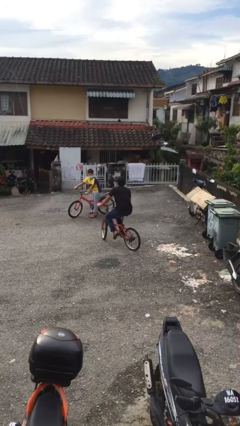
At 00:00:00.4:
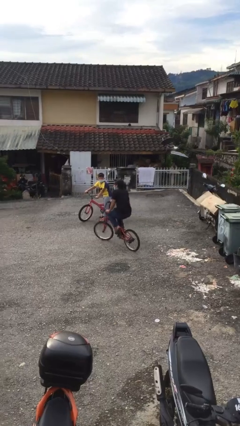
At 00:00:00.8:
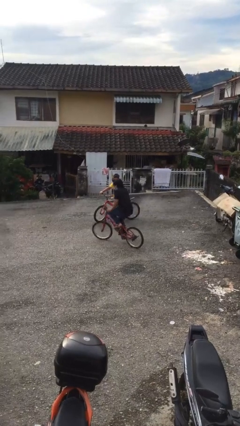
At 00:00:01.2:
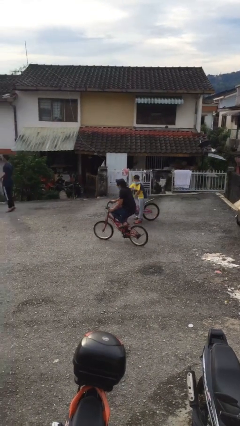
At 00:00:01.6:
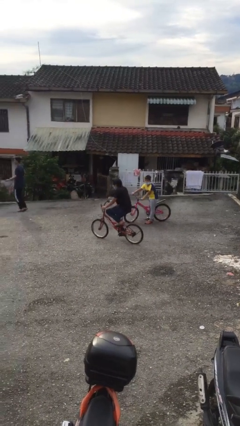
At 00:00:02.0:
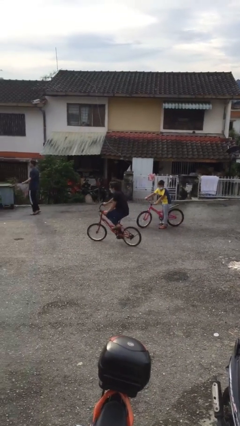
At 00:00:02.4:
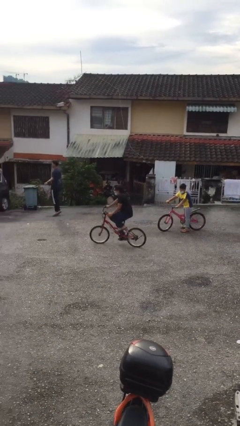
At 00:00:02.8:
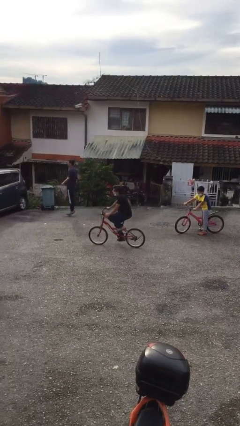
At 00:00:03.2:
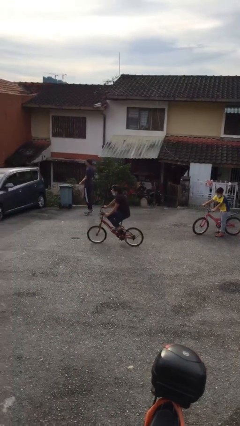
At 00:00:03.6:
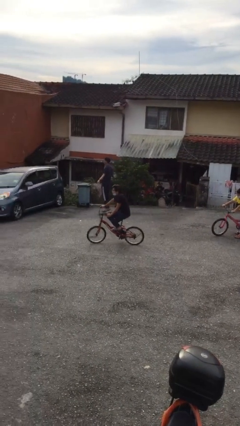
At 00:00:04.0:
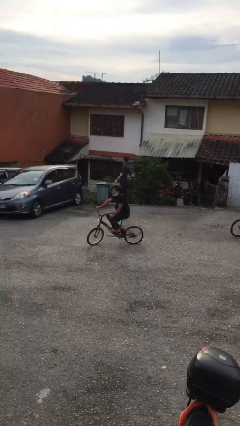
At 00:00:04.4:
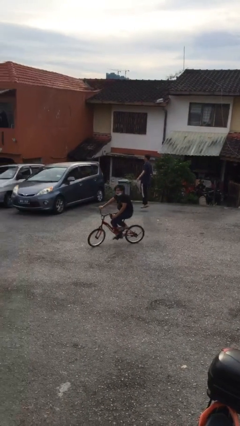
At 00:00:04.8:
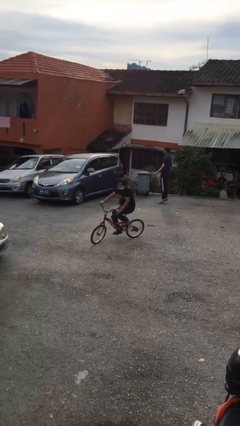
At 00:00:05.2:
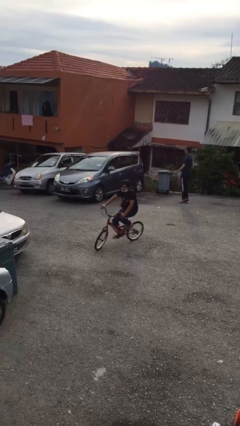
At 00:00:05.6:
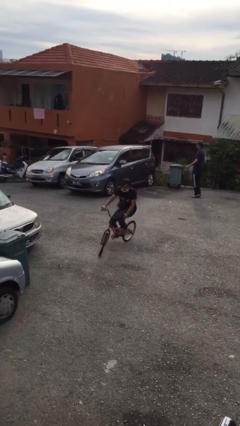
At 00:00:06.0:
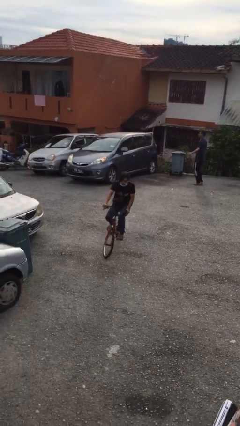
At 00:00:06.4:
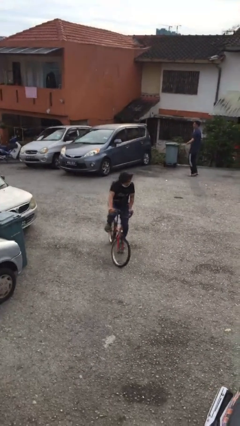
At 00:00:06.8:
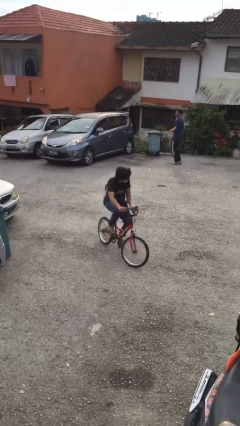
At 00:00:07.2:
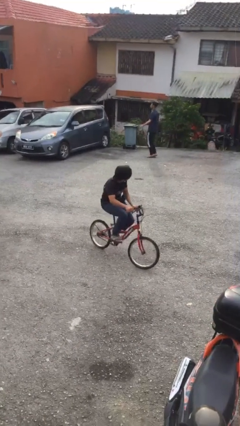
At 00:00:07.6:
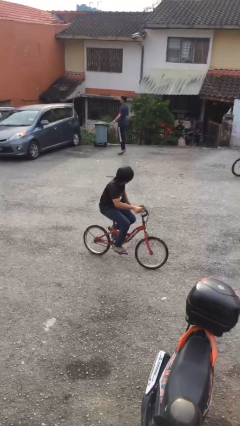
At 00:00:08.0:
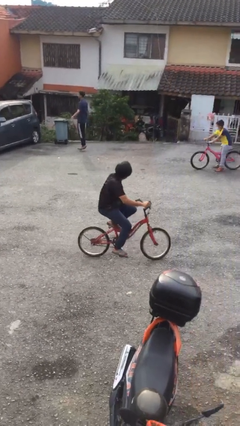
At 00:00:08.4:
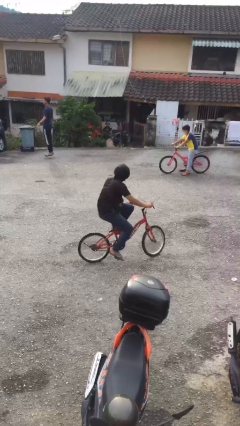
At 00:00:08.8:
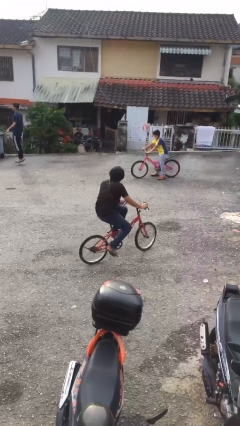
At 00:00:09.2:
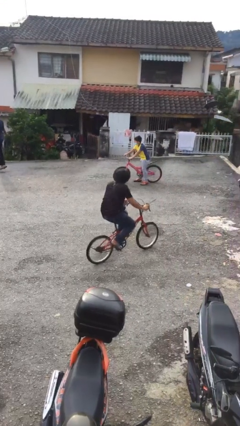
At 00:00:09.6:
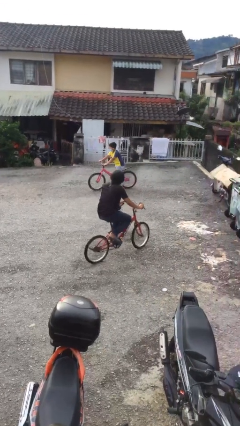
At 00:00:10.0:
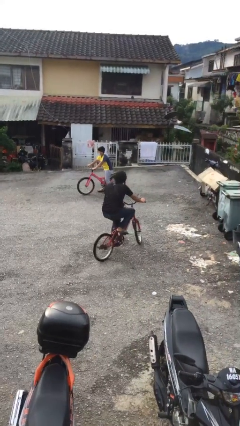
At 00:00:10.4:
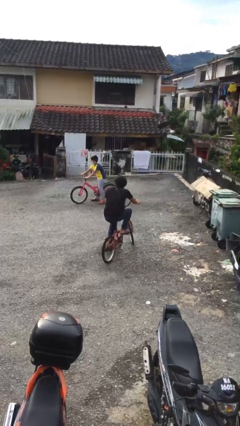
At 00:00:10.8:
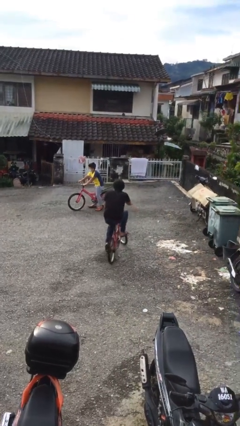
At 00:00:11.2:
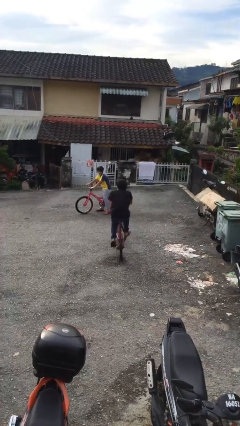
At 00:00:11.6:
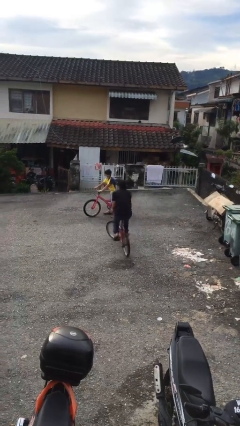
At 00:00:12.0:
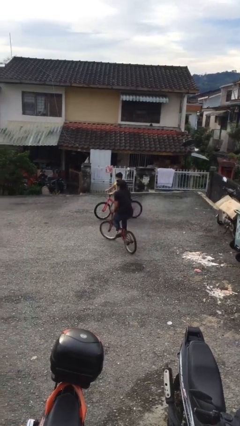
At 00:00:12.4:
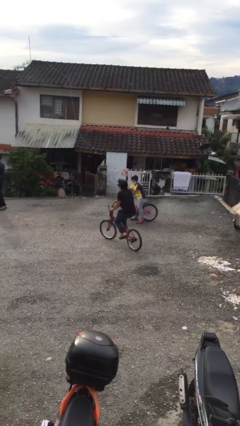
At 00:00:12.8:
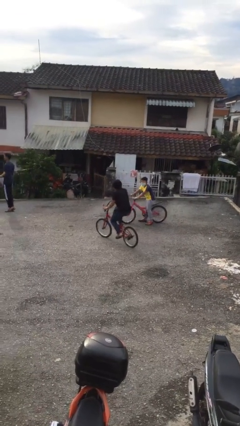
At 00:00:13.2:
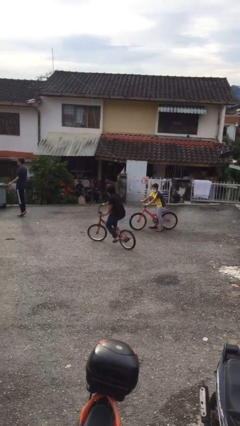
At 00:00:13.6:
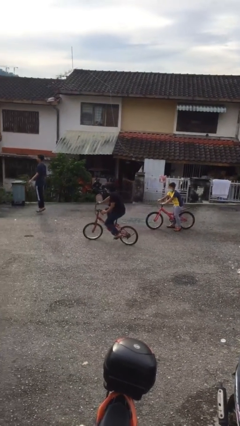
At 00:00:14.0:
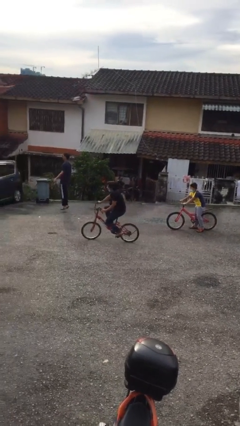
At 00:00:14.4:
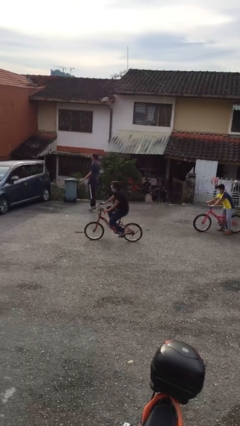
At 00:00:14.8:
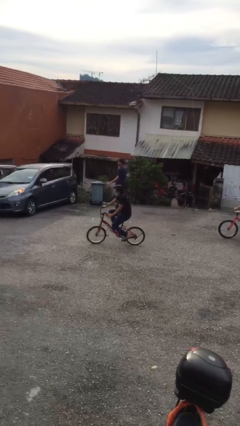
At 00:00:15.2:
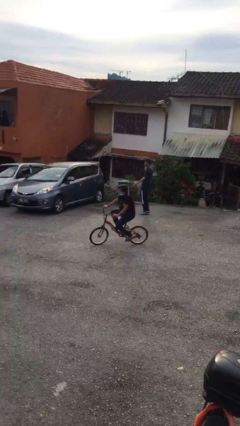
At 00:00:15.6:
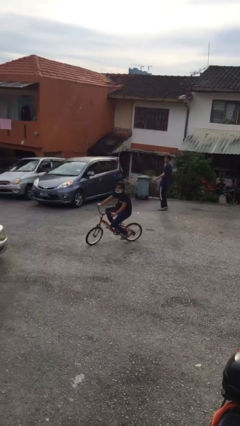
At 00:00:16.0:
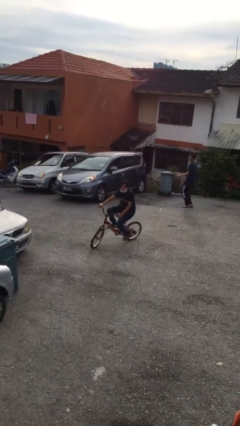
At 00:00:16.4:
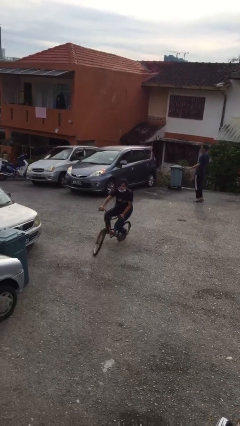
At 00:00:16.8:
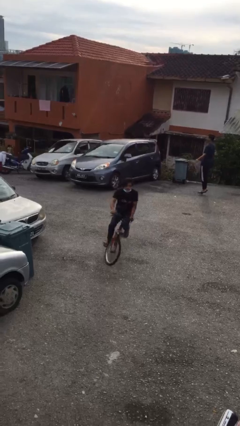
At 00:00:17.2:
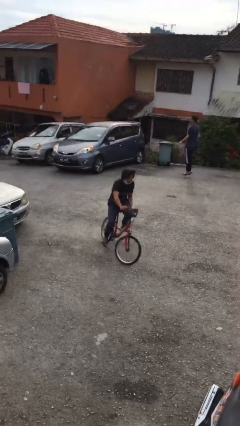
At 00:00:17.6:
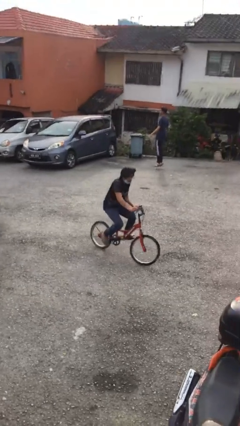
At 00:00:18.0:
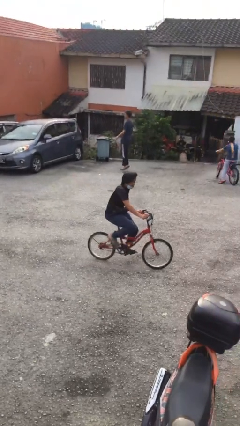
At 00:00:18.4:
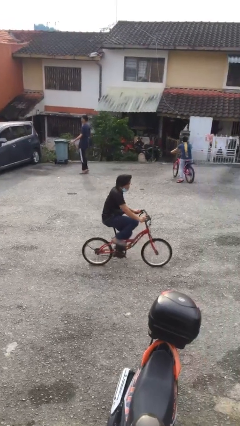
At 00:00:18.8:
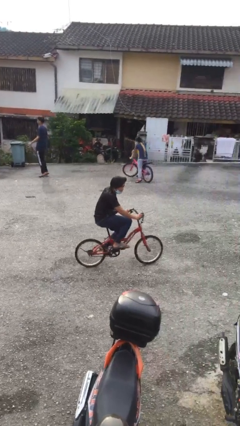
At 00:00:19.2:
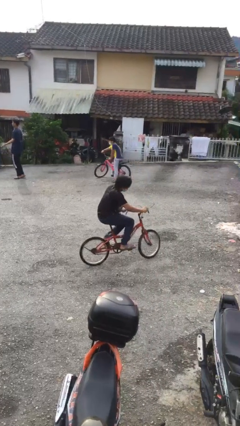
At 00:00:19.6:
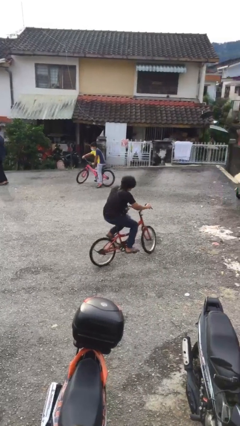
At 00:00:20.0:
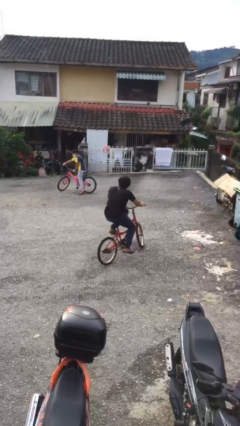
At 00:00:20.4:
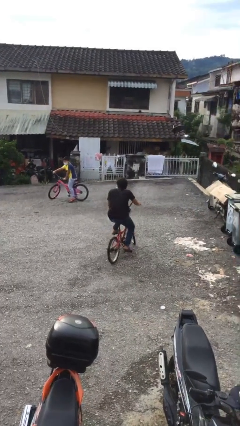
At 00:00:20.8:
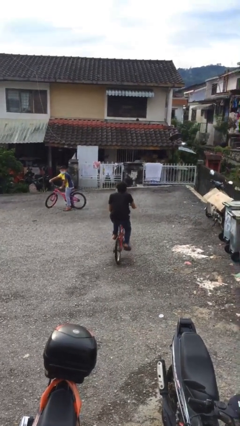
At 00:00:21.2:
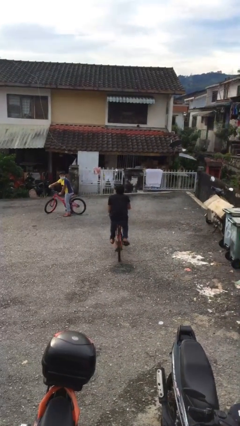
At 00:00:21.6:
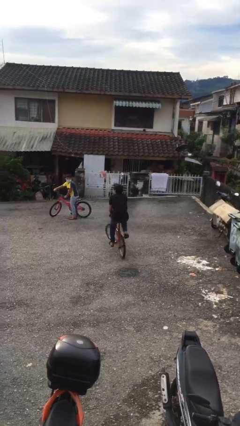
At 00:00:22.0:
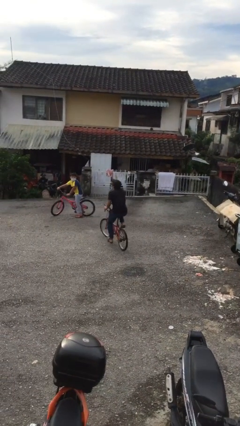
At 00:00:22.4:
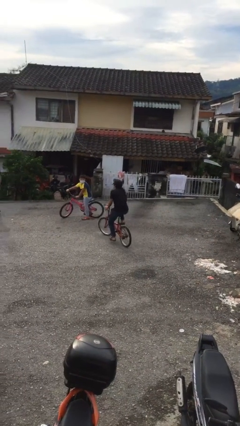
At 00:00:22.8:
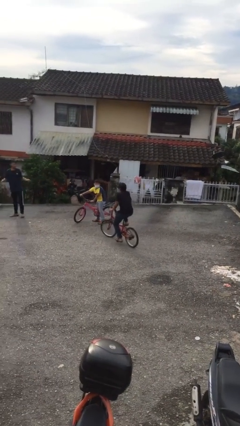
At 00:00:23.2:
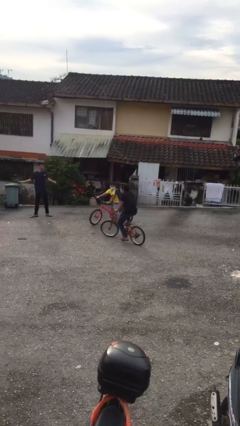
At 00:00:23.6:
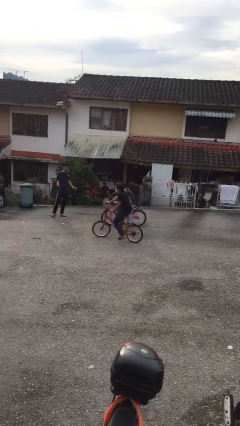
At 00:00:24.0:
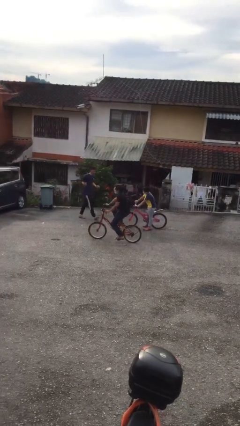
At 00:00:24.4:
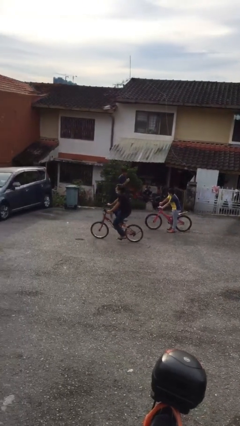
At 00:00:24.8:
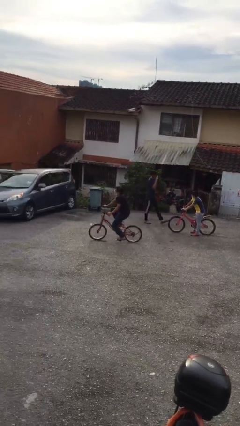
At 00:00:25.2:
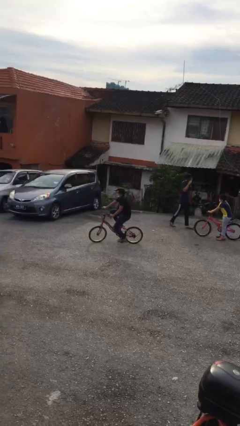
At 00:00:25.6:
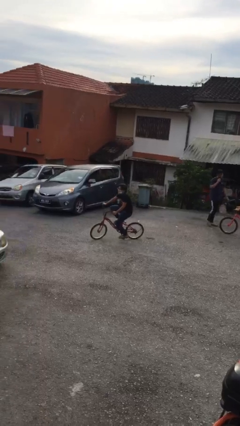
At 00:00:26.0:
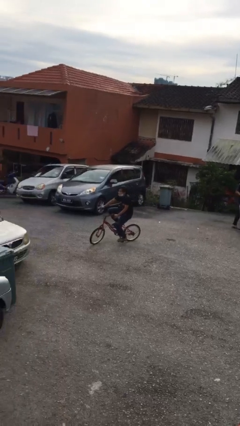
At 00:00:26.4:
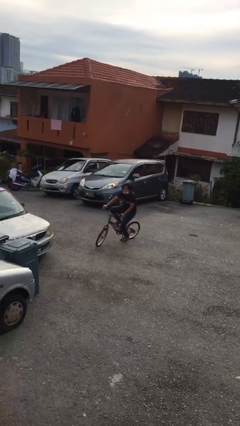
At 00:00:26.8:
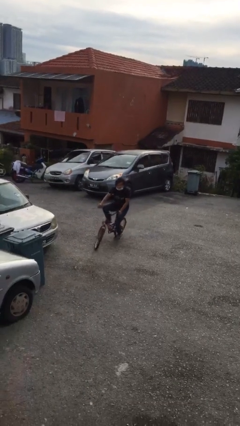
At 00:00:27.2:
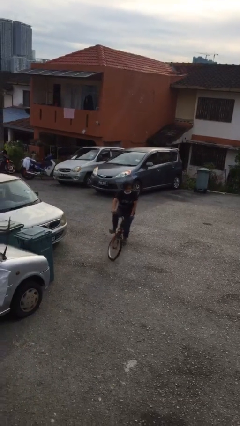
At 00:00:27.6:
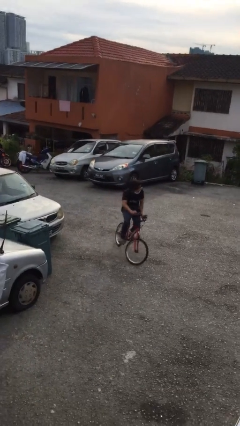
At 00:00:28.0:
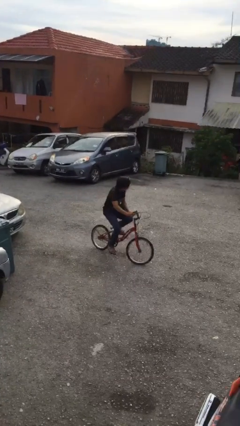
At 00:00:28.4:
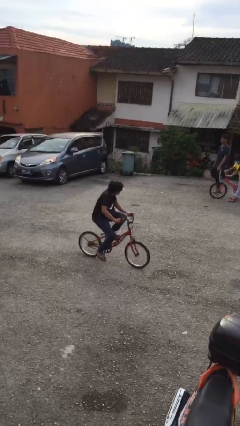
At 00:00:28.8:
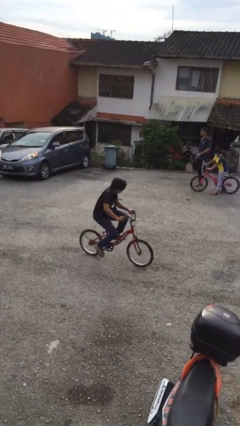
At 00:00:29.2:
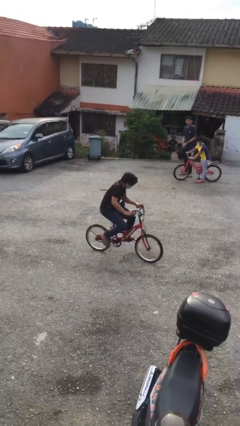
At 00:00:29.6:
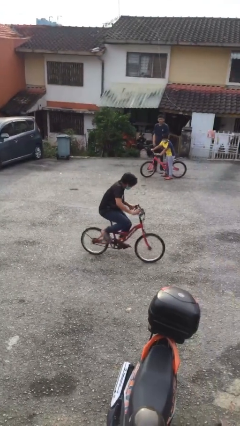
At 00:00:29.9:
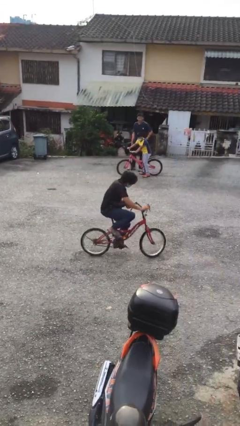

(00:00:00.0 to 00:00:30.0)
person rides bicycle

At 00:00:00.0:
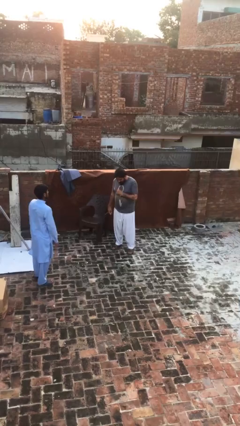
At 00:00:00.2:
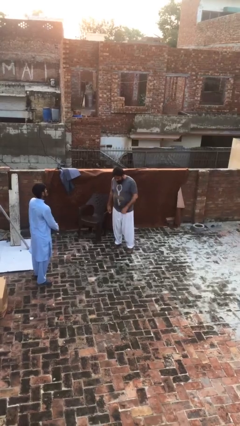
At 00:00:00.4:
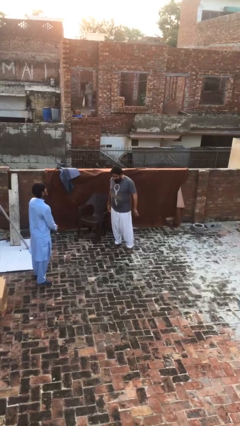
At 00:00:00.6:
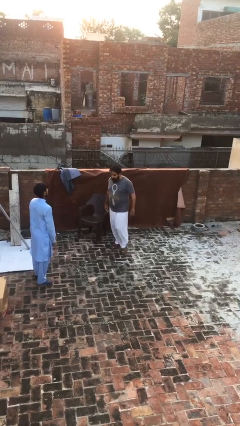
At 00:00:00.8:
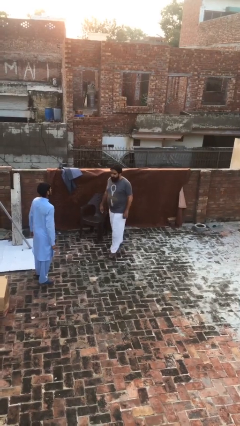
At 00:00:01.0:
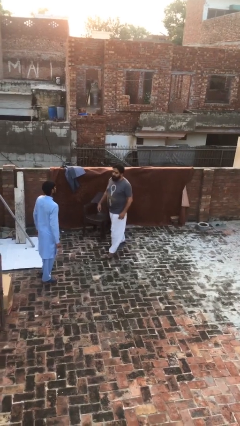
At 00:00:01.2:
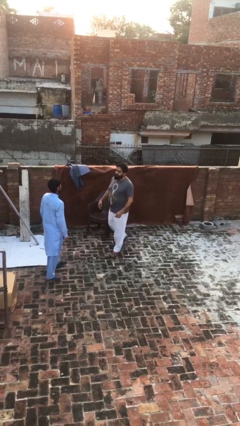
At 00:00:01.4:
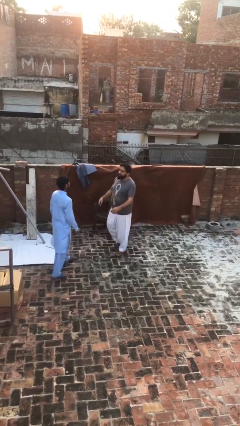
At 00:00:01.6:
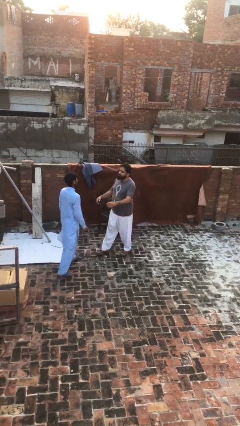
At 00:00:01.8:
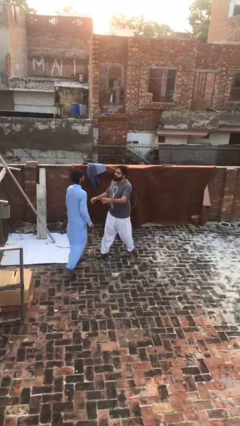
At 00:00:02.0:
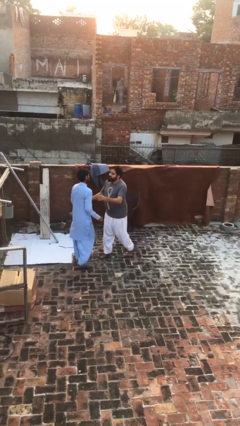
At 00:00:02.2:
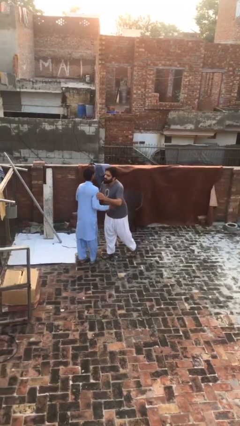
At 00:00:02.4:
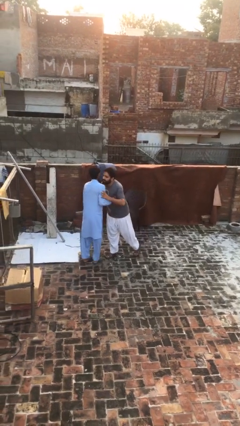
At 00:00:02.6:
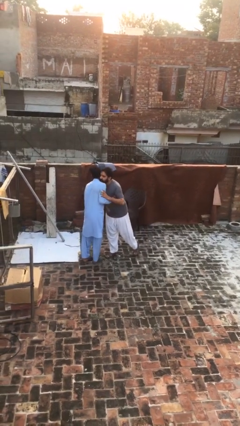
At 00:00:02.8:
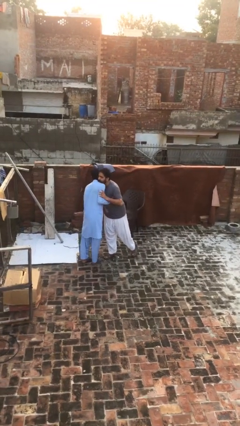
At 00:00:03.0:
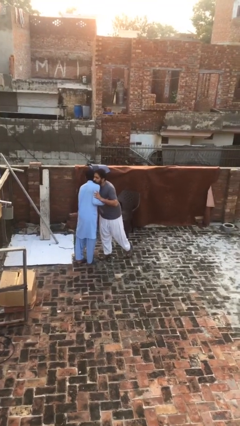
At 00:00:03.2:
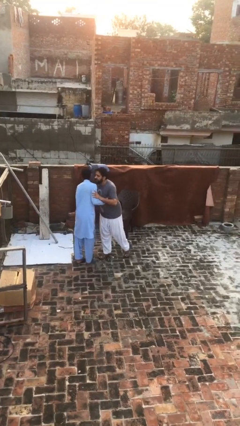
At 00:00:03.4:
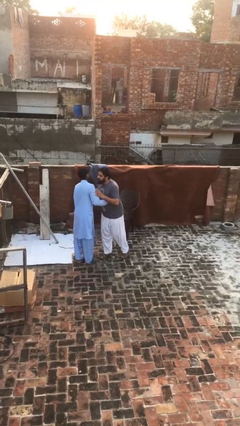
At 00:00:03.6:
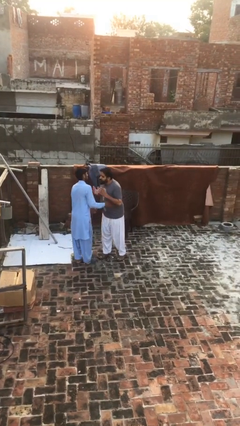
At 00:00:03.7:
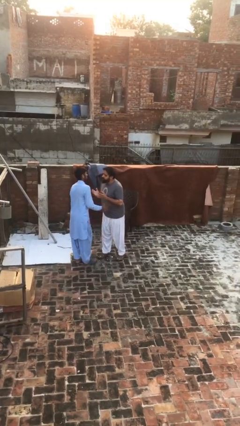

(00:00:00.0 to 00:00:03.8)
person embraces person
